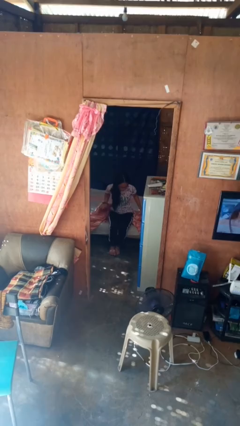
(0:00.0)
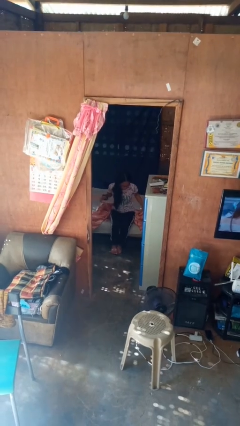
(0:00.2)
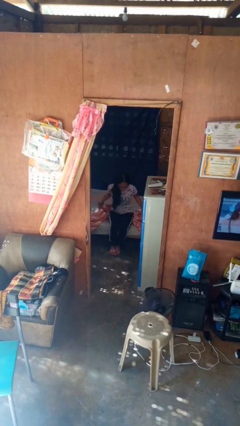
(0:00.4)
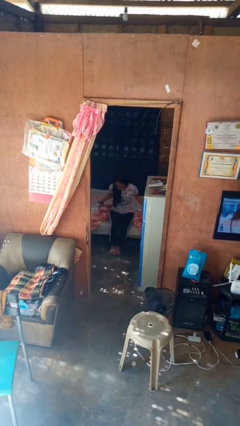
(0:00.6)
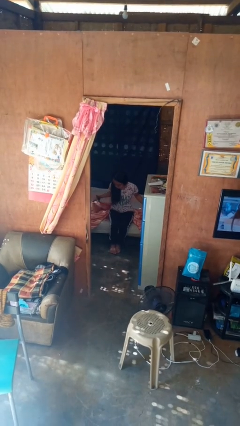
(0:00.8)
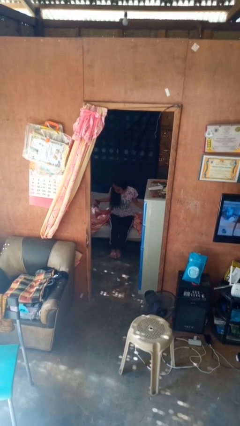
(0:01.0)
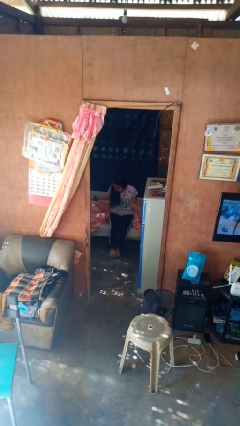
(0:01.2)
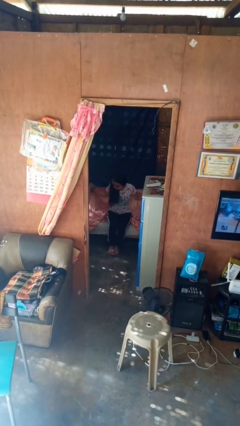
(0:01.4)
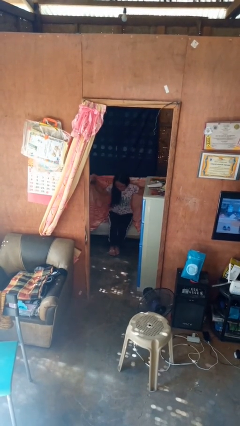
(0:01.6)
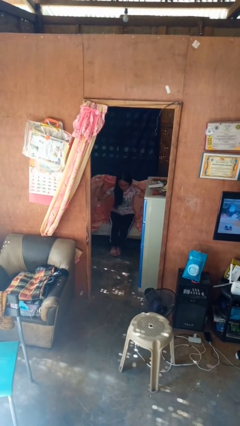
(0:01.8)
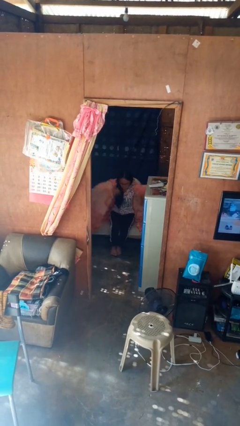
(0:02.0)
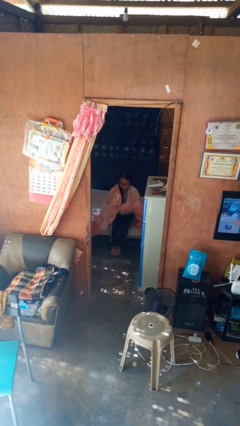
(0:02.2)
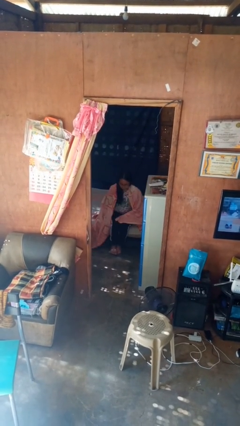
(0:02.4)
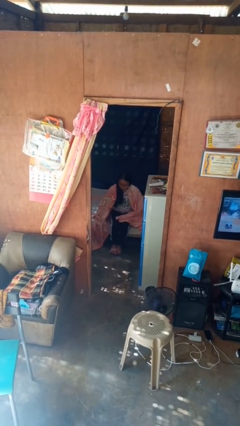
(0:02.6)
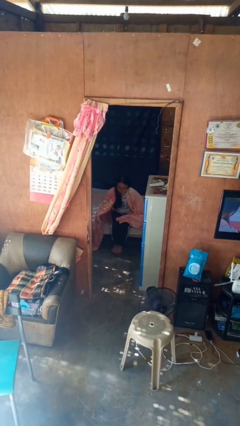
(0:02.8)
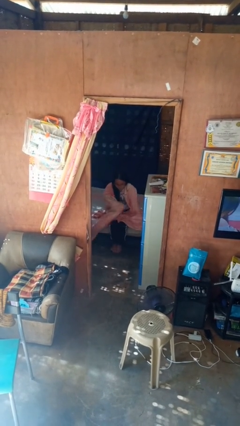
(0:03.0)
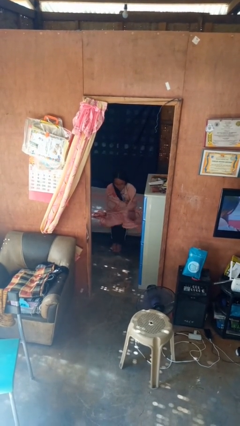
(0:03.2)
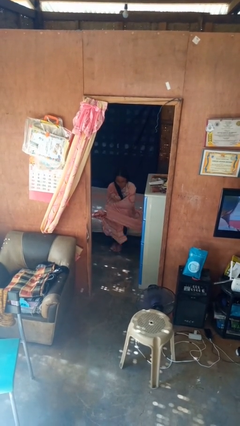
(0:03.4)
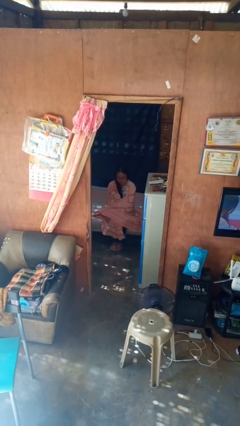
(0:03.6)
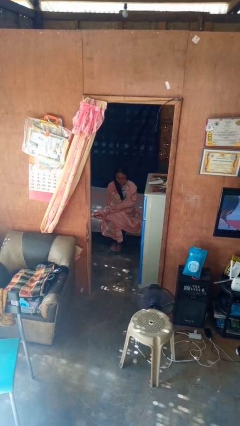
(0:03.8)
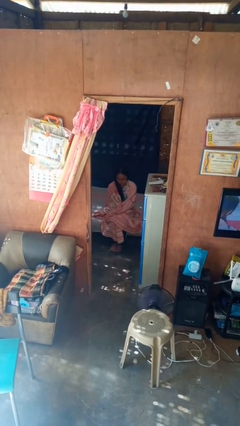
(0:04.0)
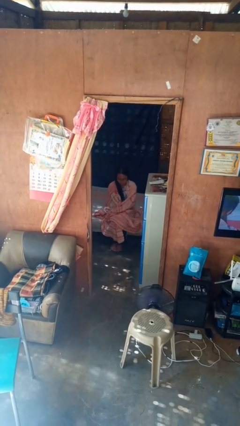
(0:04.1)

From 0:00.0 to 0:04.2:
person covers with blanket

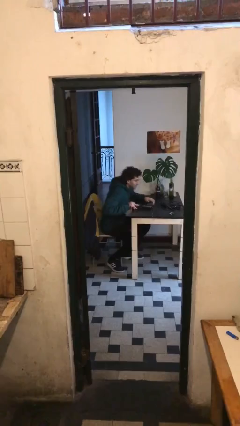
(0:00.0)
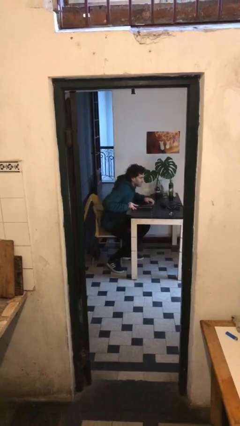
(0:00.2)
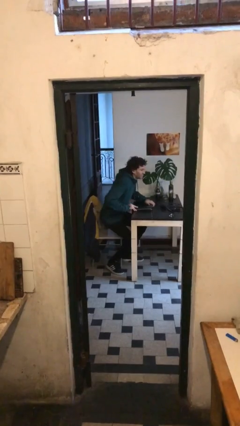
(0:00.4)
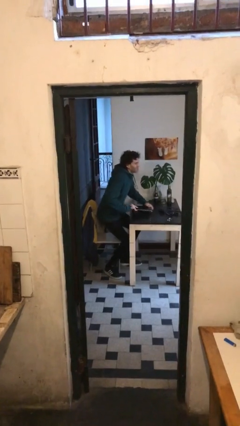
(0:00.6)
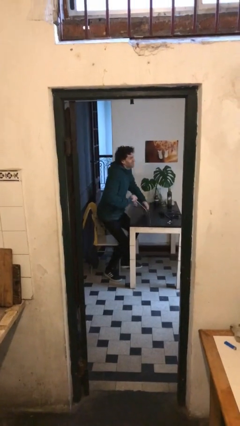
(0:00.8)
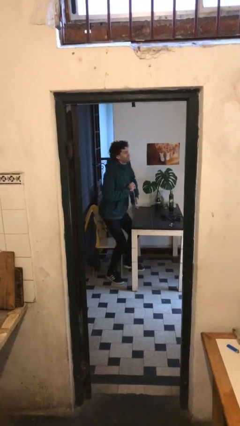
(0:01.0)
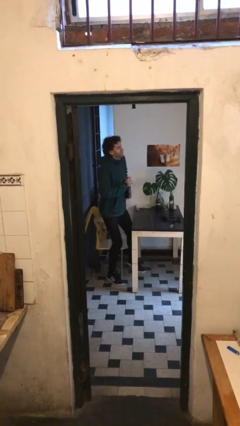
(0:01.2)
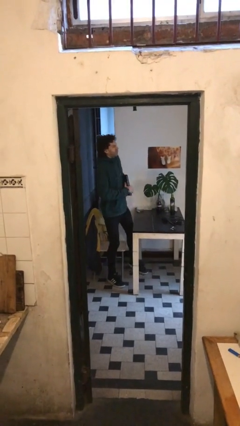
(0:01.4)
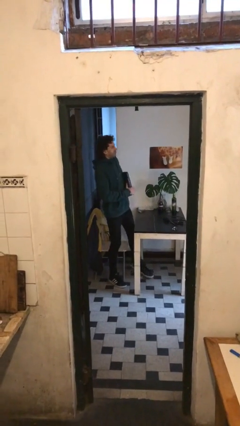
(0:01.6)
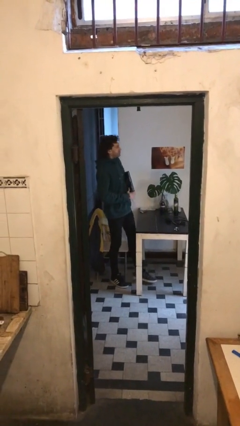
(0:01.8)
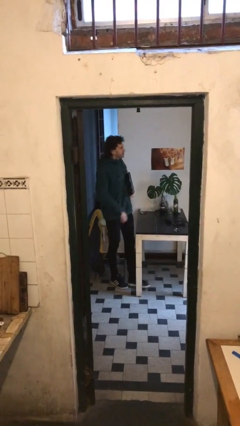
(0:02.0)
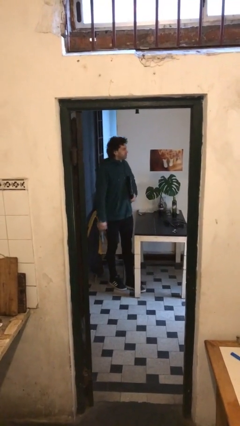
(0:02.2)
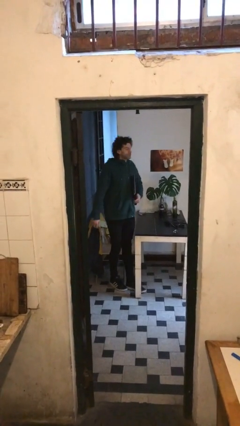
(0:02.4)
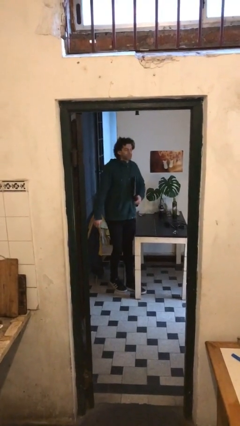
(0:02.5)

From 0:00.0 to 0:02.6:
person stands up

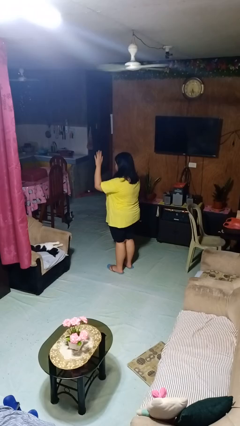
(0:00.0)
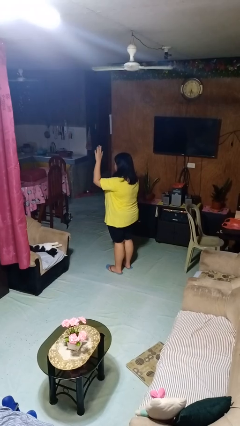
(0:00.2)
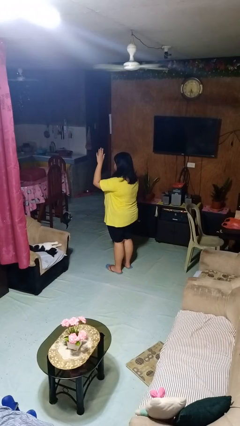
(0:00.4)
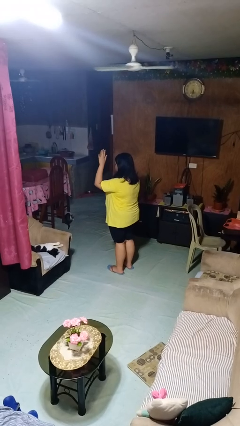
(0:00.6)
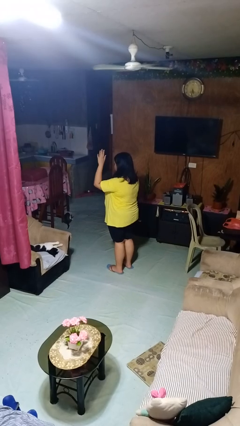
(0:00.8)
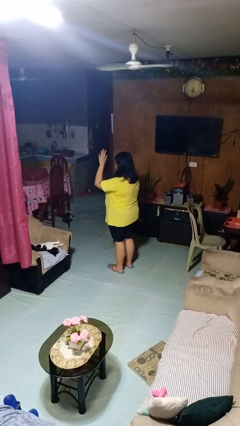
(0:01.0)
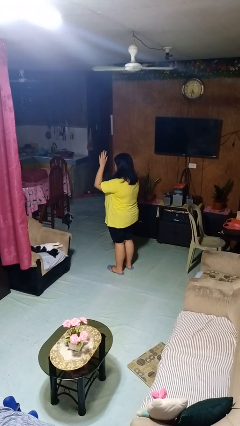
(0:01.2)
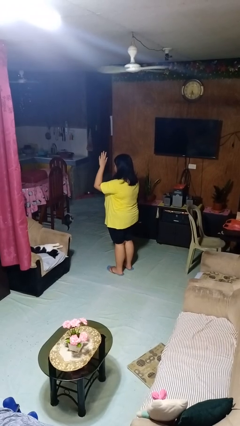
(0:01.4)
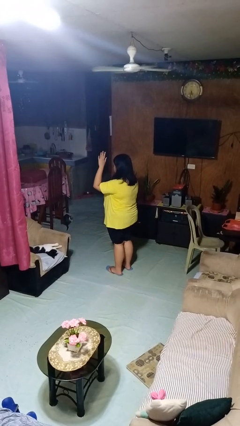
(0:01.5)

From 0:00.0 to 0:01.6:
person gestures raise hand

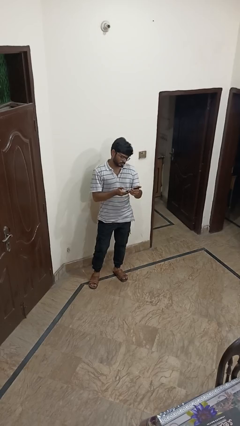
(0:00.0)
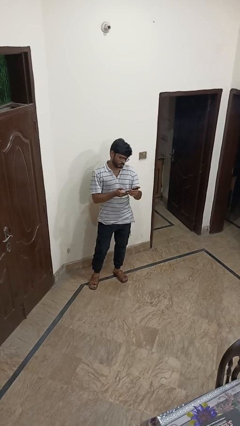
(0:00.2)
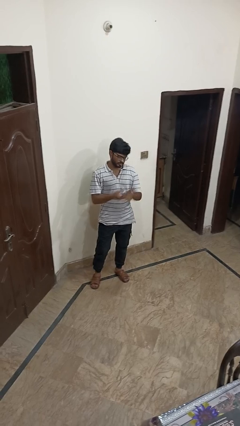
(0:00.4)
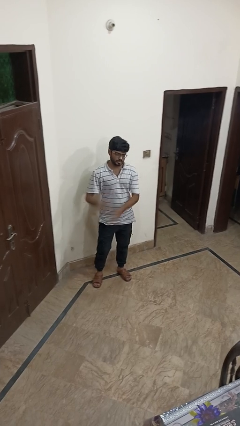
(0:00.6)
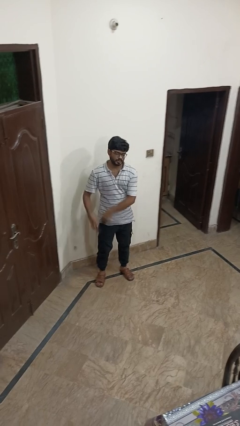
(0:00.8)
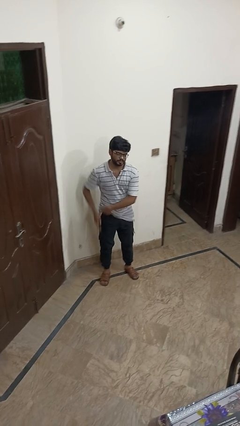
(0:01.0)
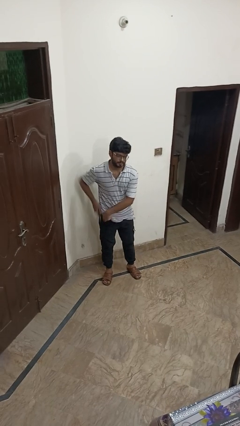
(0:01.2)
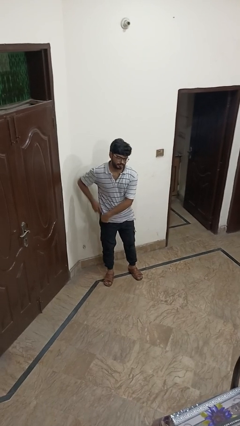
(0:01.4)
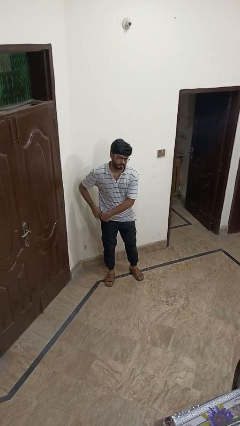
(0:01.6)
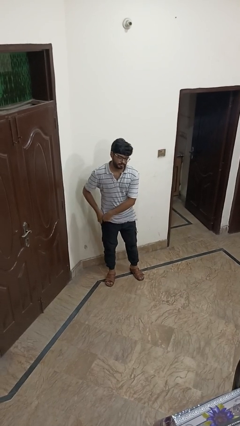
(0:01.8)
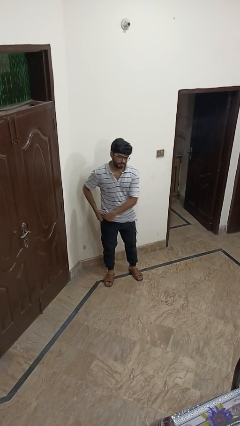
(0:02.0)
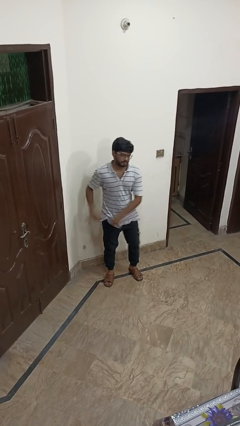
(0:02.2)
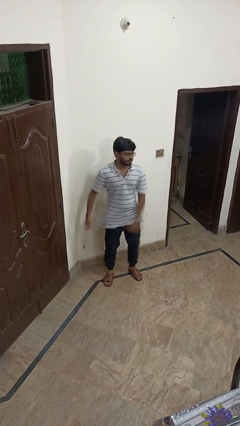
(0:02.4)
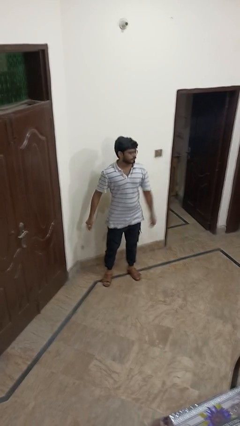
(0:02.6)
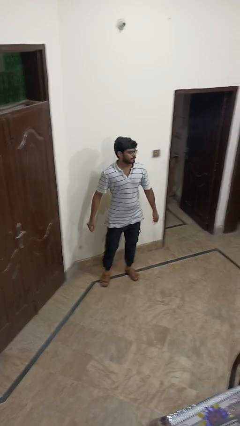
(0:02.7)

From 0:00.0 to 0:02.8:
person puts phone into pocket

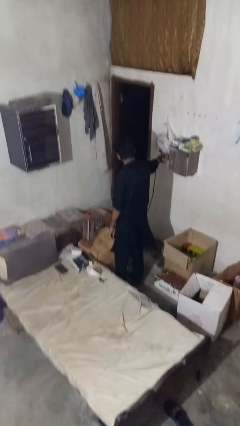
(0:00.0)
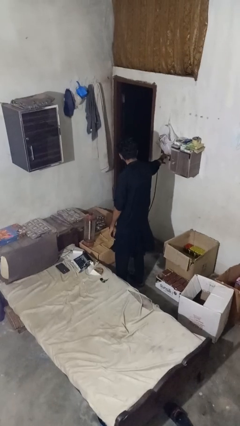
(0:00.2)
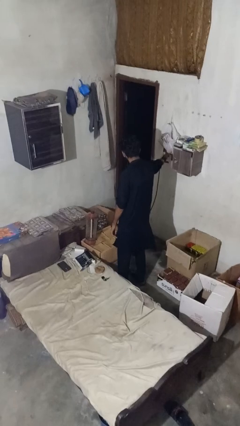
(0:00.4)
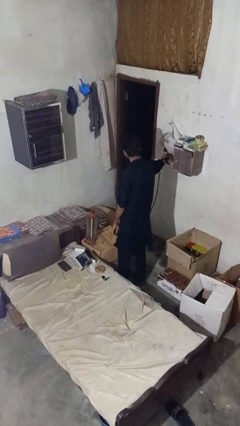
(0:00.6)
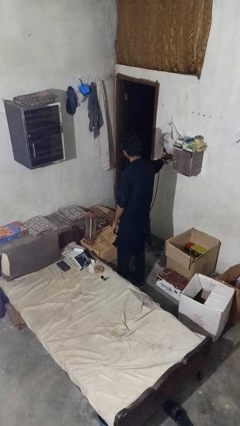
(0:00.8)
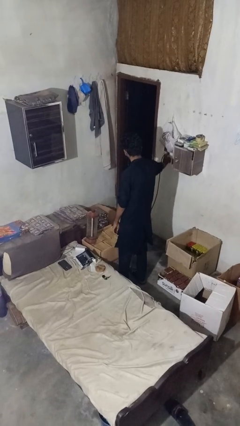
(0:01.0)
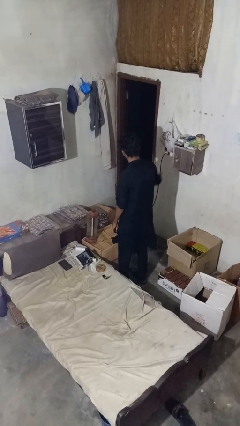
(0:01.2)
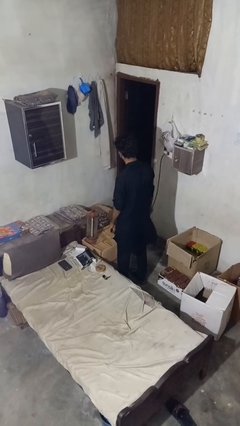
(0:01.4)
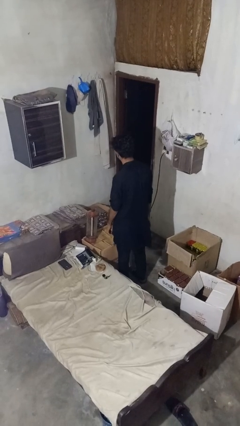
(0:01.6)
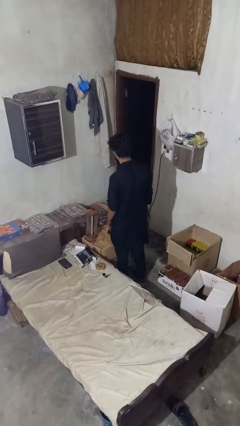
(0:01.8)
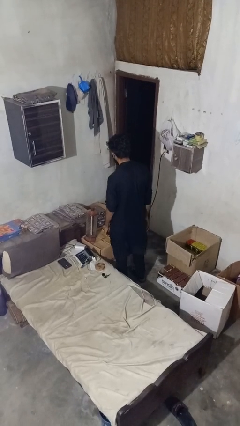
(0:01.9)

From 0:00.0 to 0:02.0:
person turns off lamp

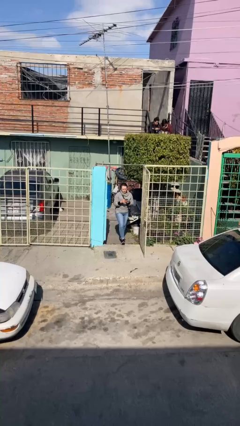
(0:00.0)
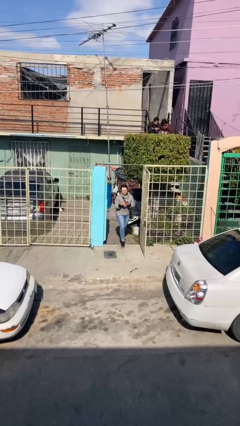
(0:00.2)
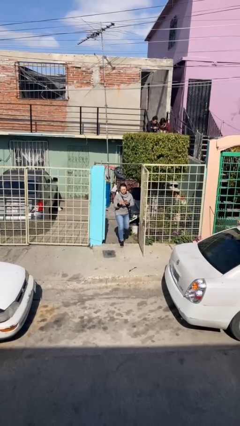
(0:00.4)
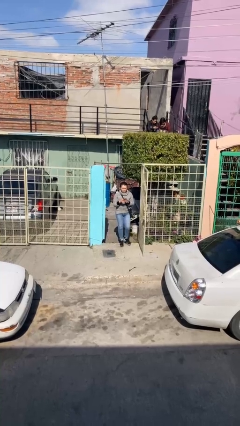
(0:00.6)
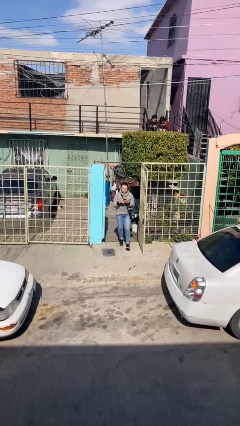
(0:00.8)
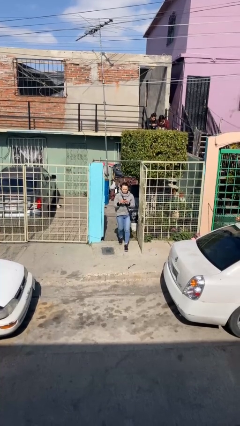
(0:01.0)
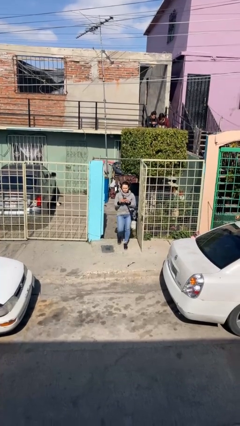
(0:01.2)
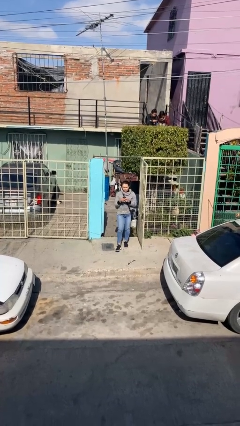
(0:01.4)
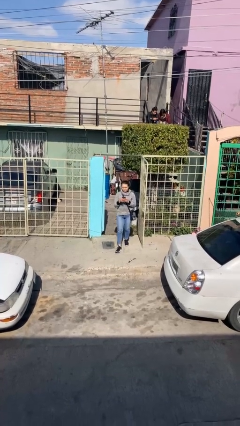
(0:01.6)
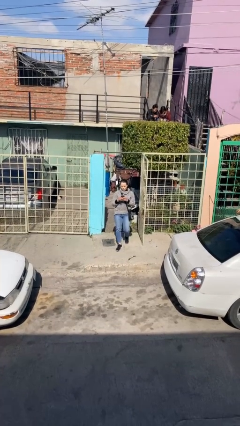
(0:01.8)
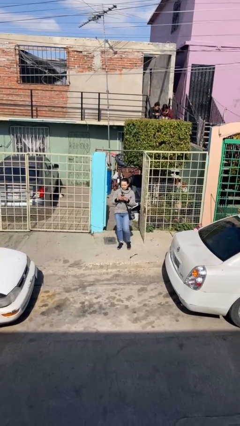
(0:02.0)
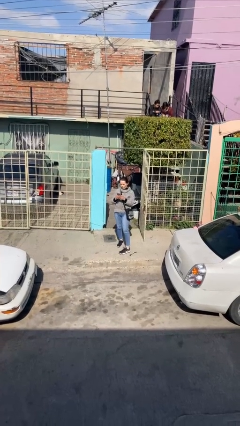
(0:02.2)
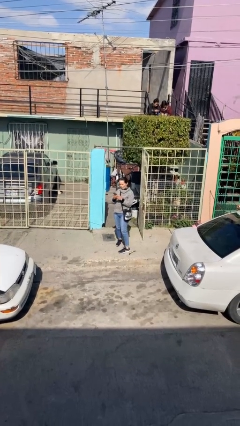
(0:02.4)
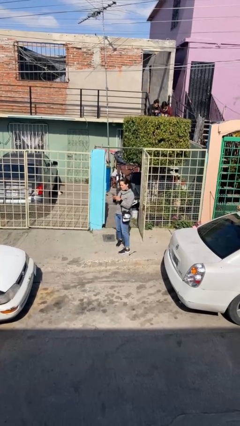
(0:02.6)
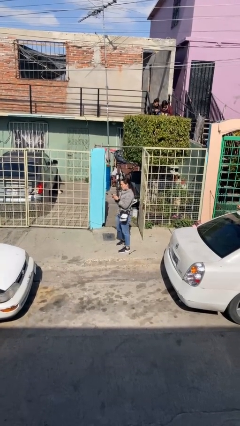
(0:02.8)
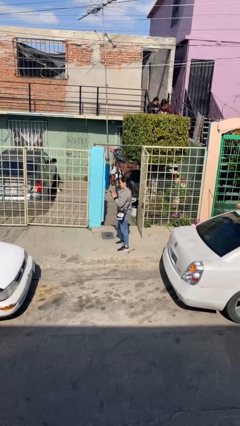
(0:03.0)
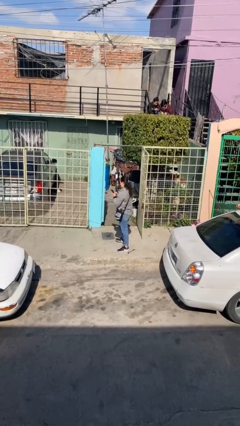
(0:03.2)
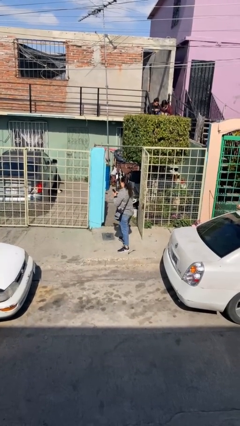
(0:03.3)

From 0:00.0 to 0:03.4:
person enters scene through structure

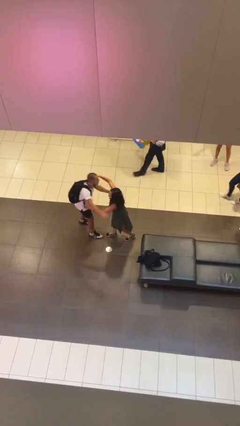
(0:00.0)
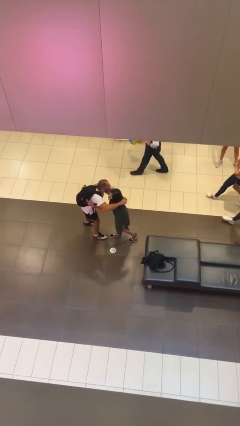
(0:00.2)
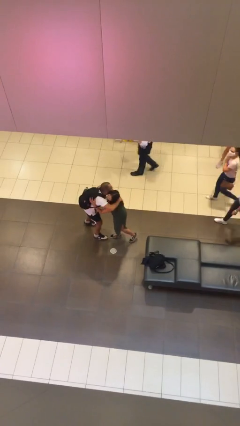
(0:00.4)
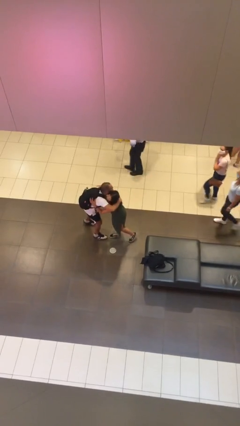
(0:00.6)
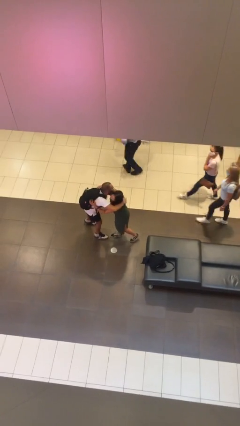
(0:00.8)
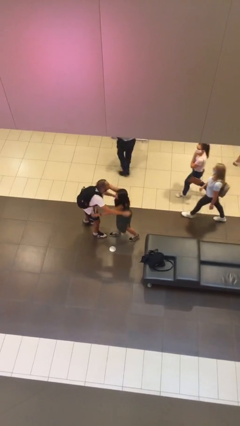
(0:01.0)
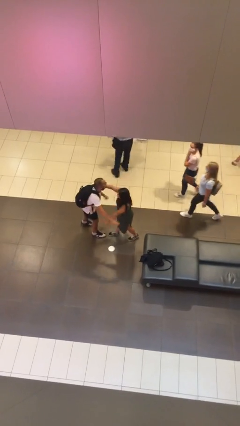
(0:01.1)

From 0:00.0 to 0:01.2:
person embraces person
